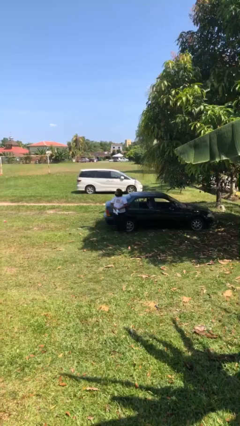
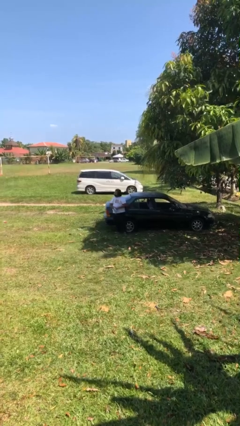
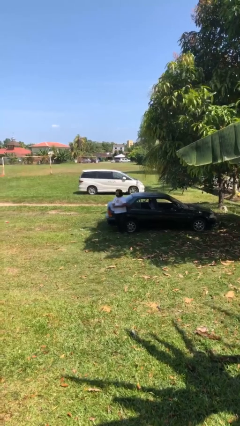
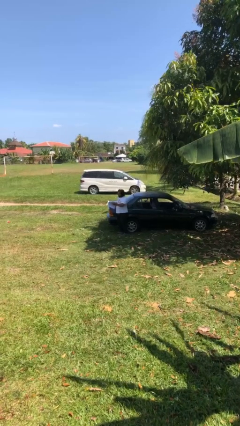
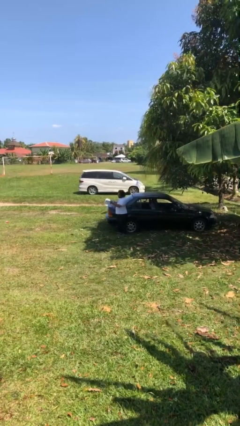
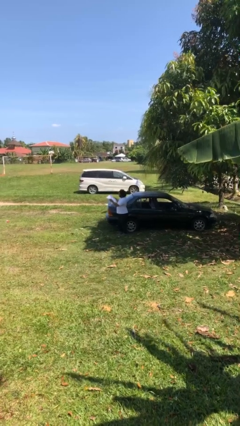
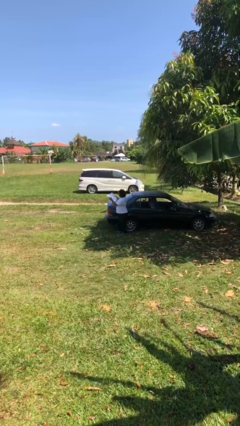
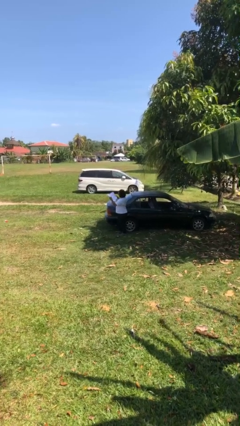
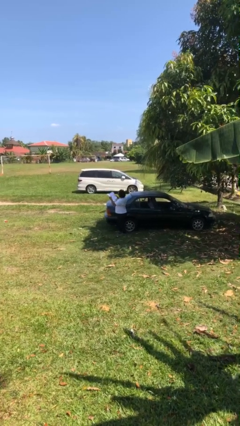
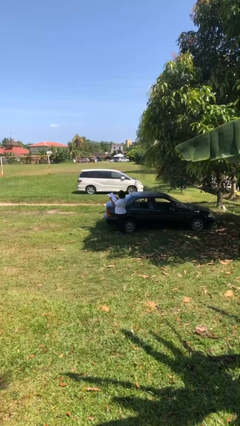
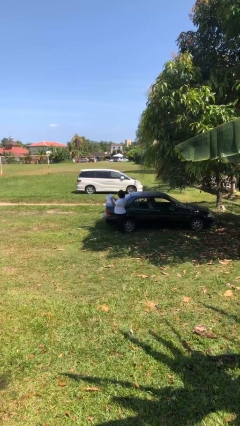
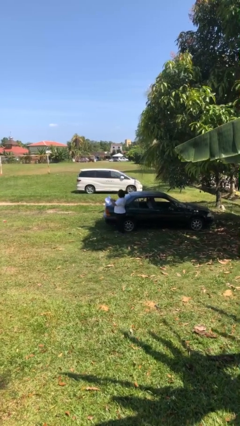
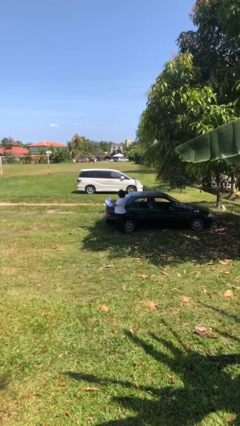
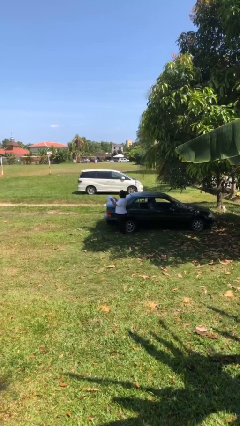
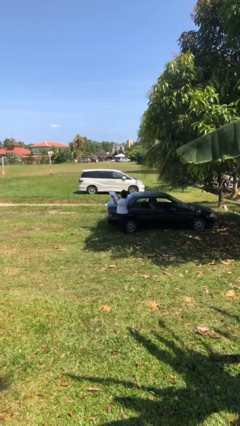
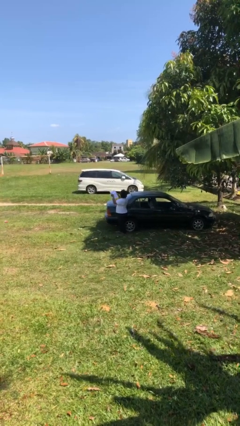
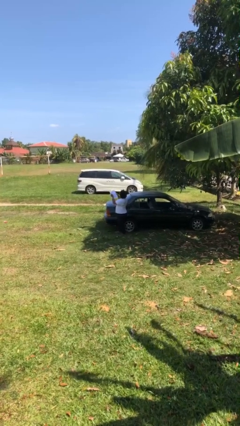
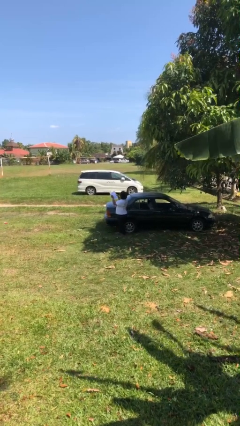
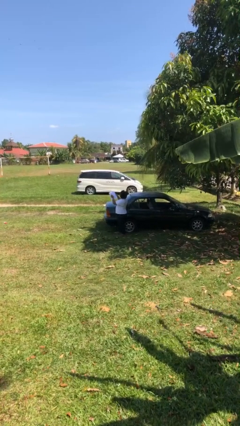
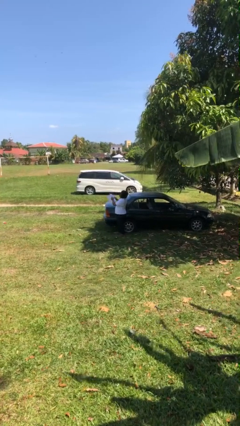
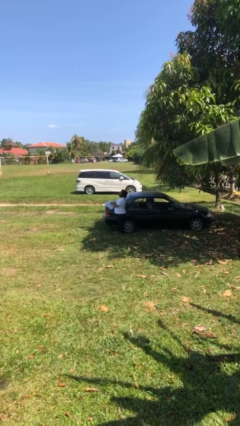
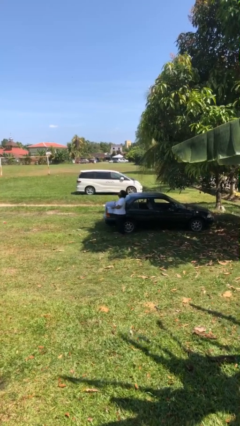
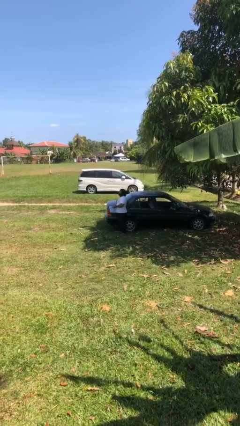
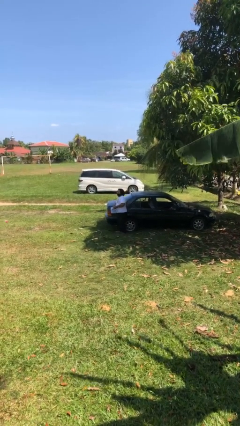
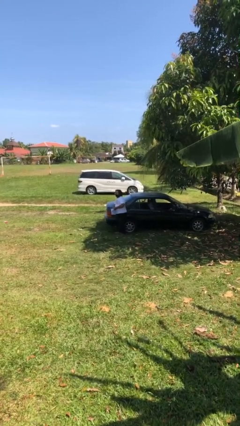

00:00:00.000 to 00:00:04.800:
person reads document

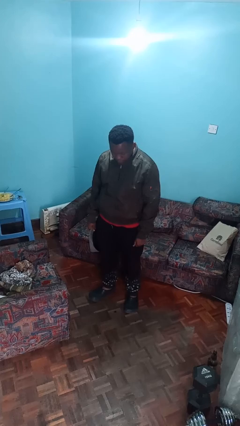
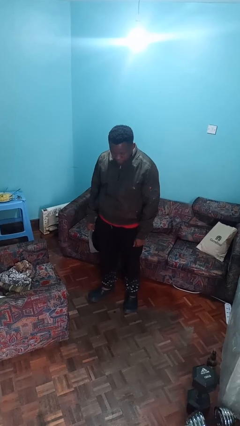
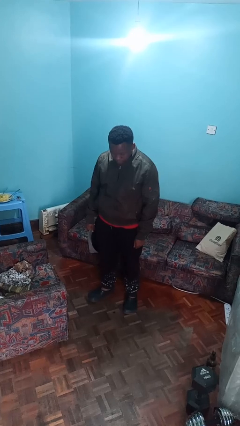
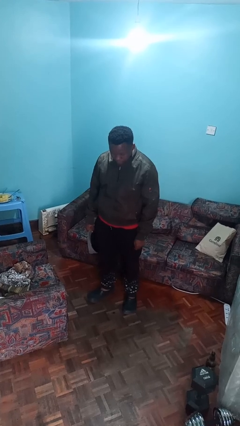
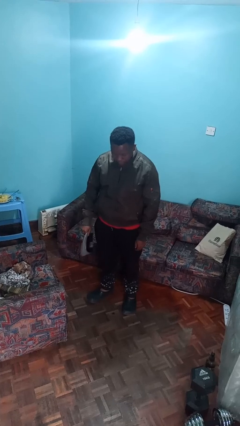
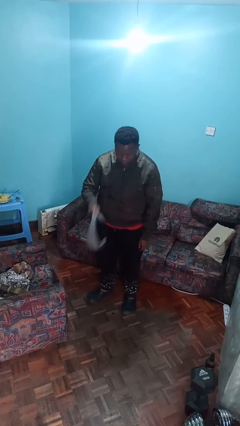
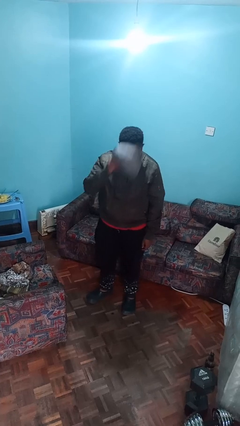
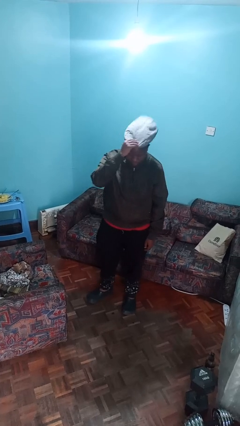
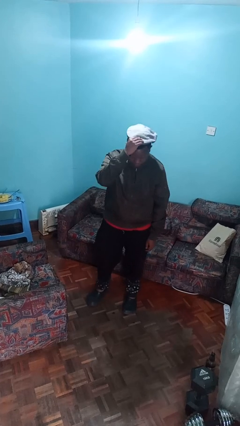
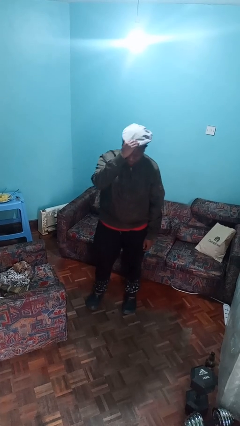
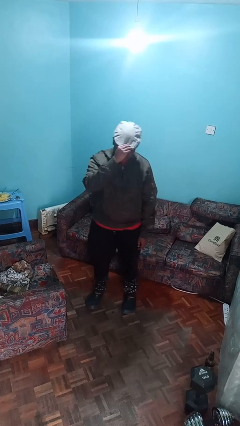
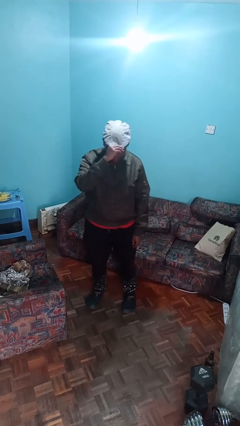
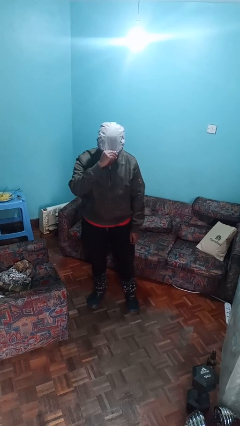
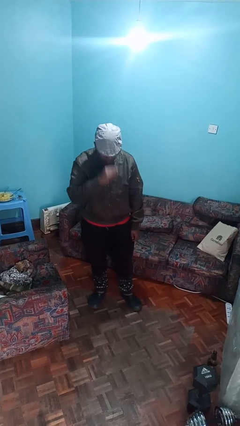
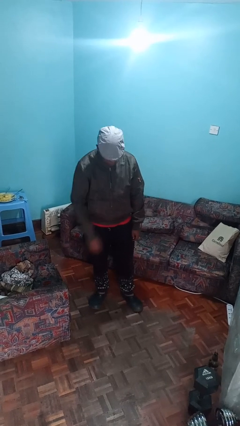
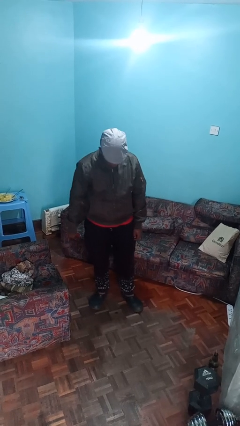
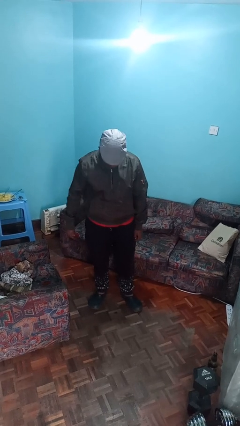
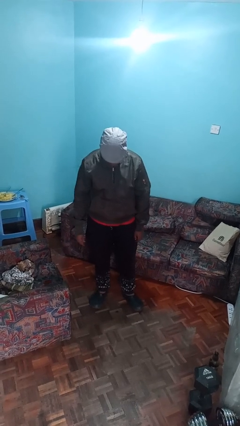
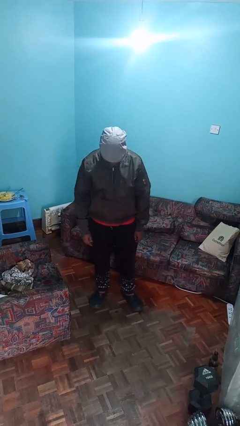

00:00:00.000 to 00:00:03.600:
person puts on hat

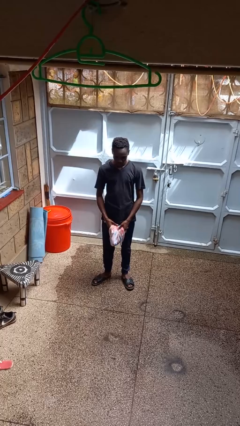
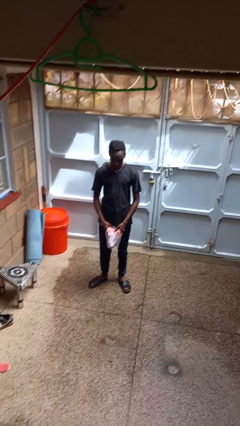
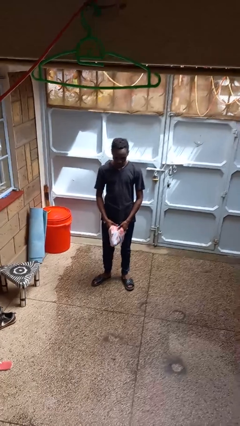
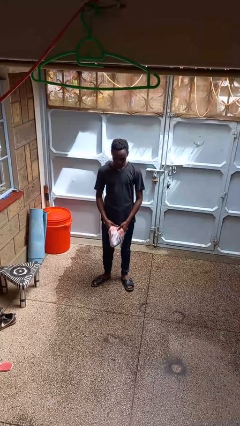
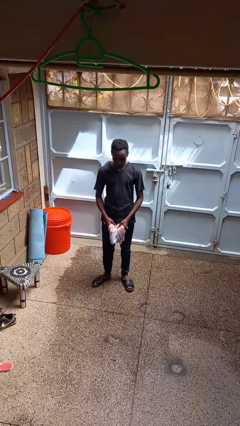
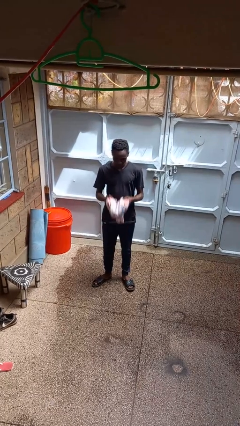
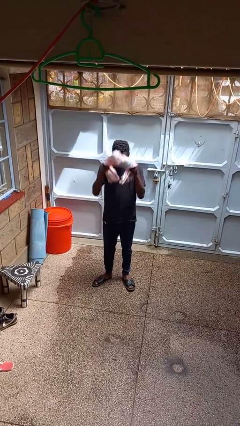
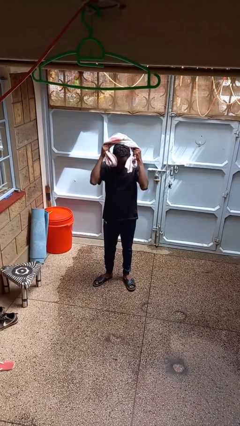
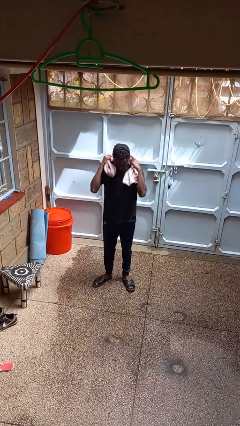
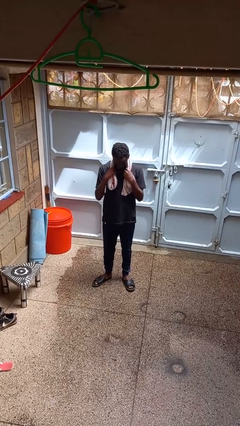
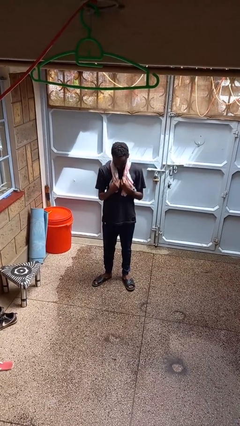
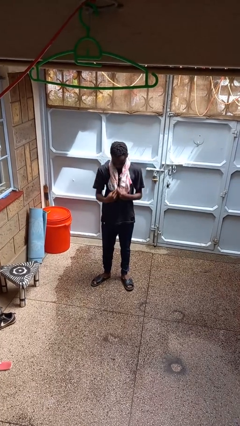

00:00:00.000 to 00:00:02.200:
person puts on scarf

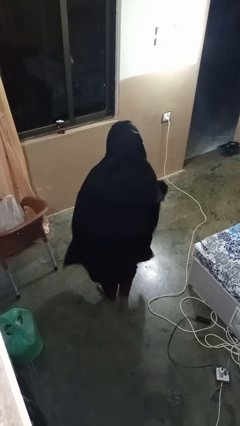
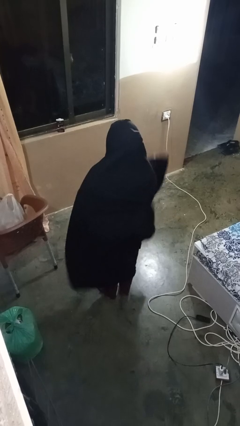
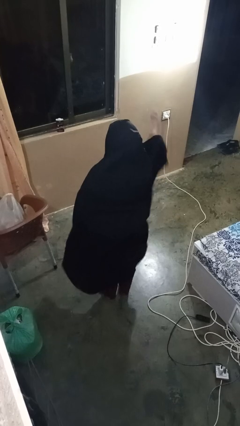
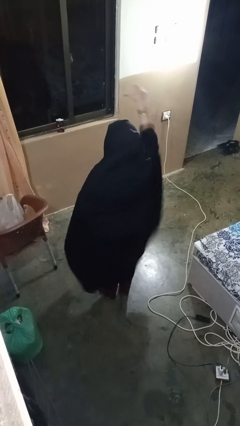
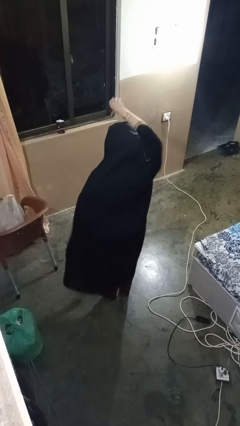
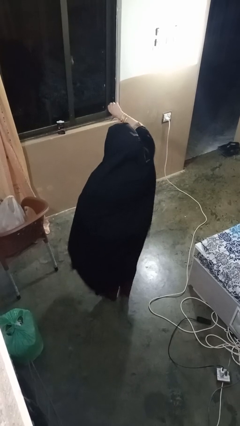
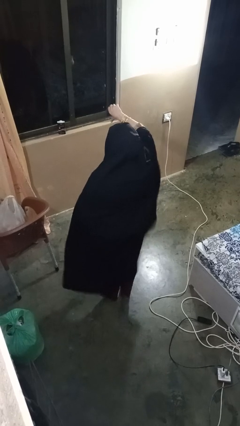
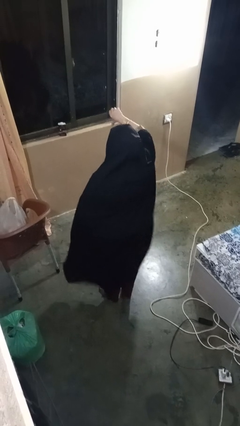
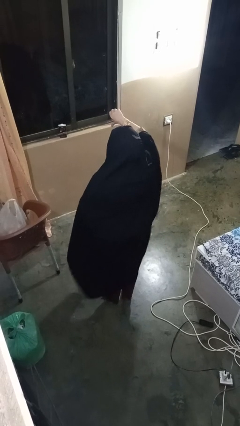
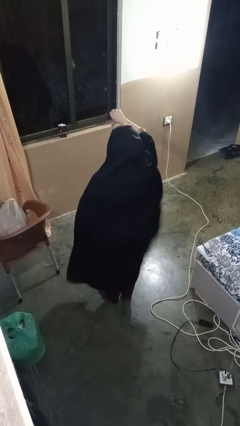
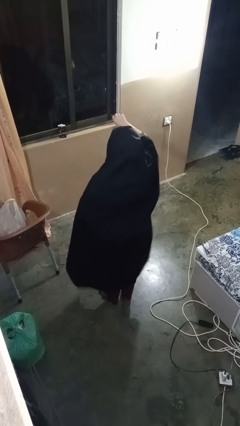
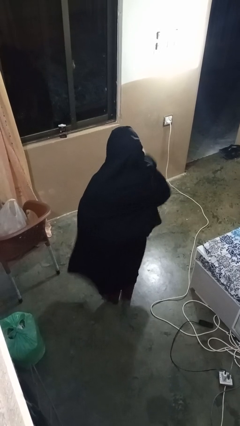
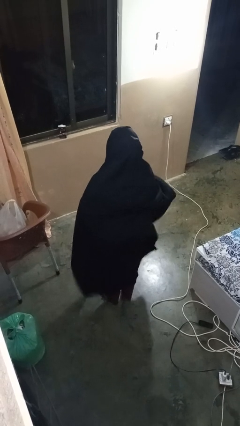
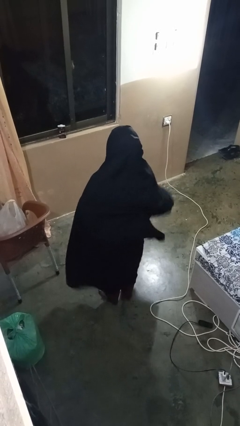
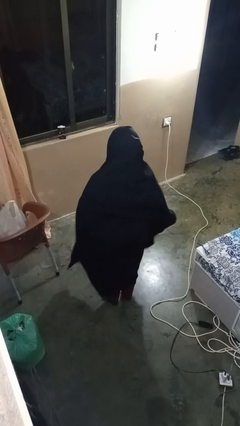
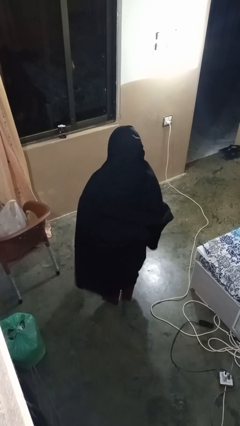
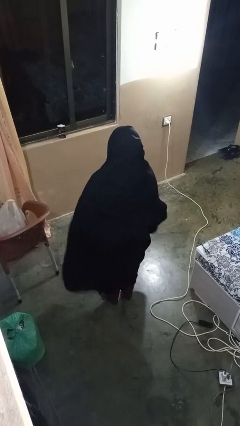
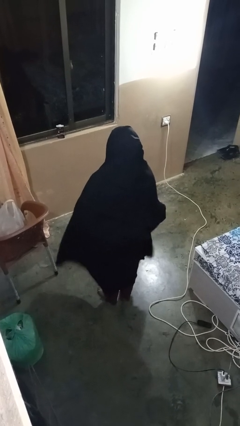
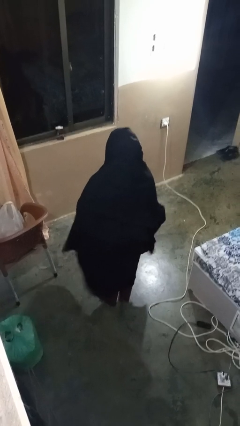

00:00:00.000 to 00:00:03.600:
person gestures thumbs down

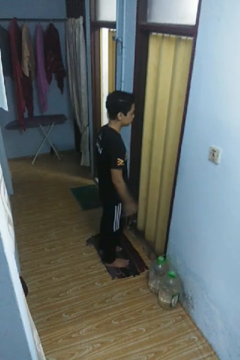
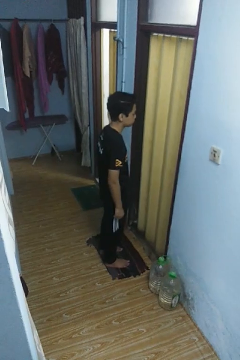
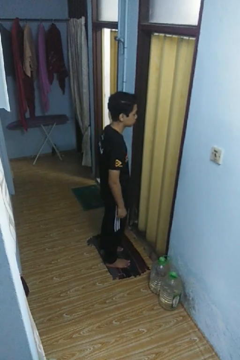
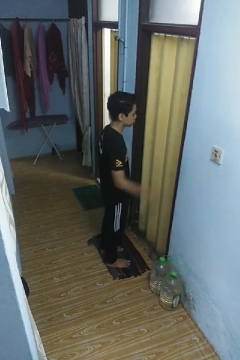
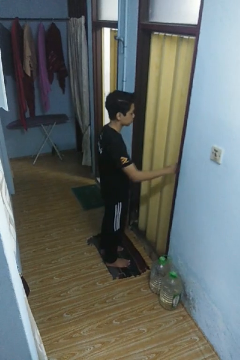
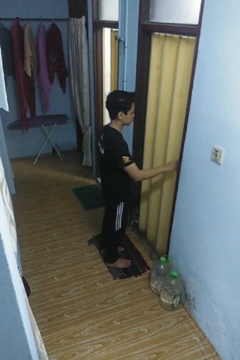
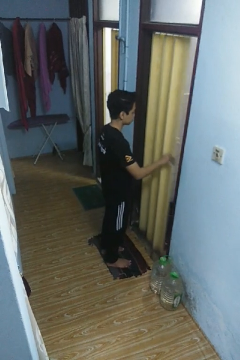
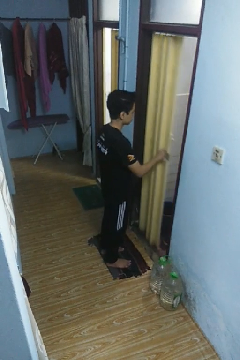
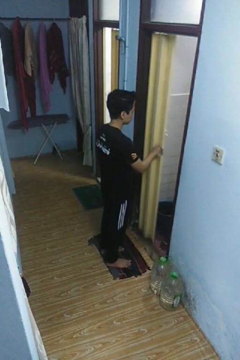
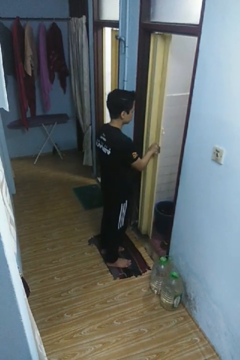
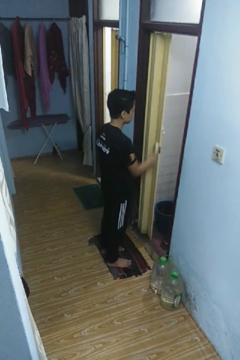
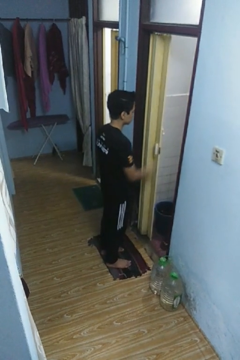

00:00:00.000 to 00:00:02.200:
person opens sliding door

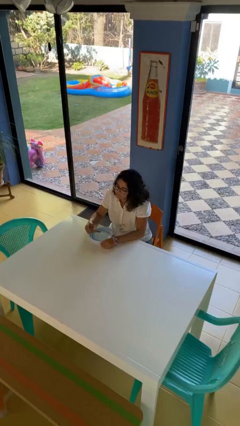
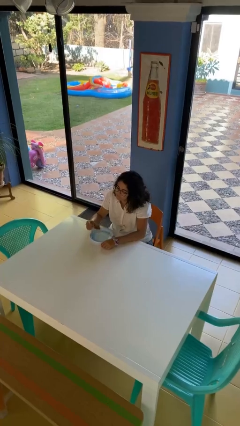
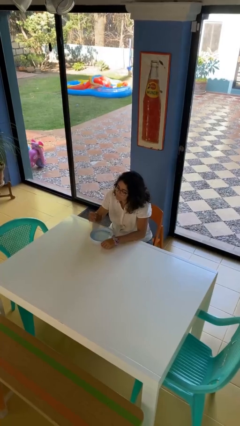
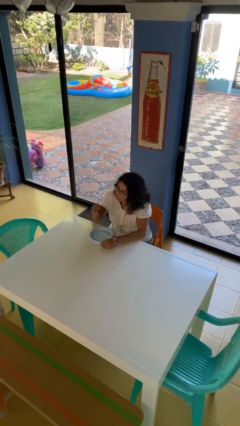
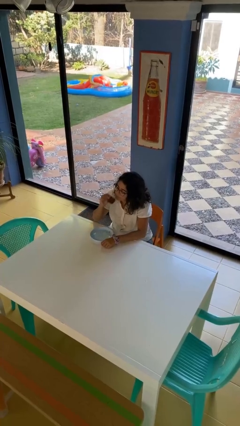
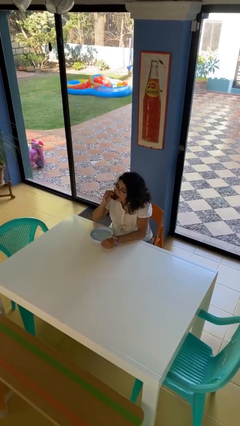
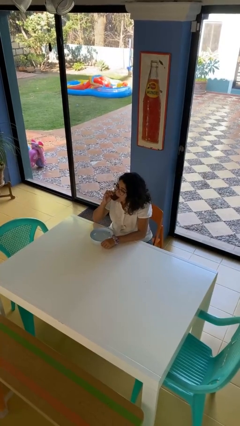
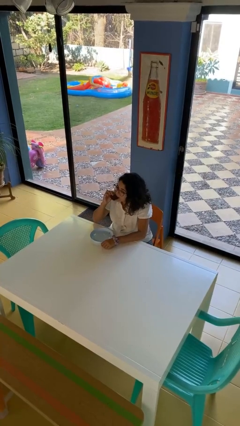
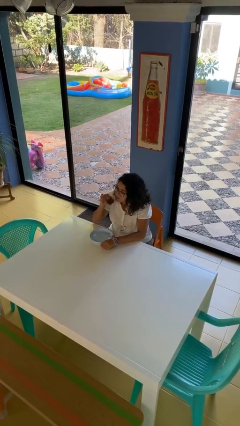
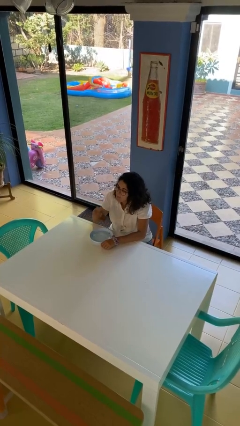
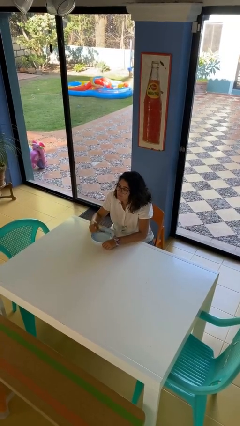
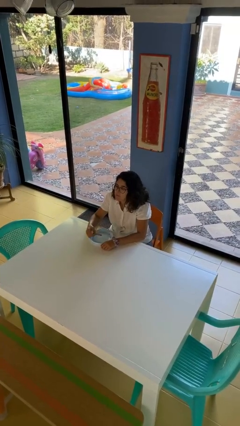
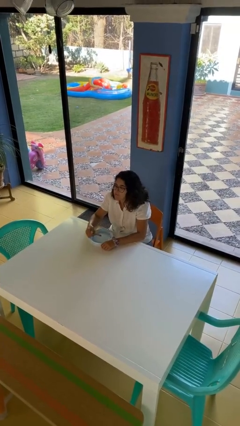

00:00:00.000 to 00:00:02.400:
person eats with hands
